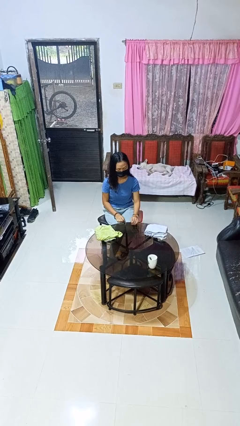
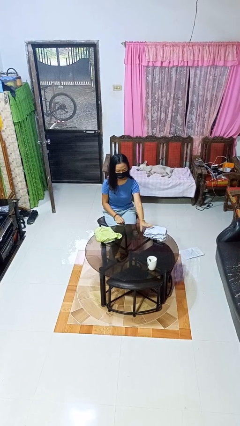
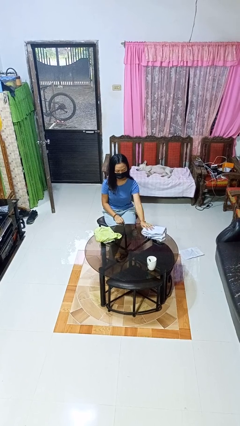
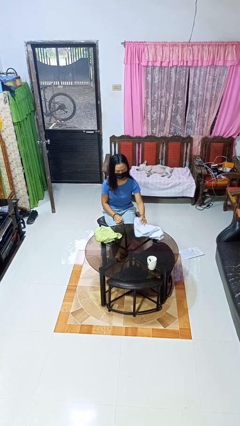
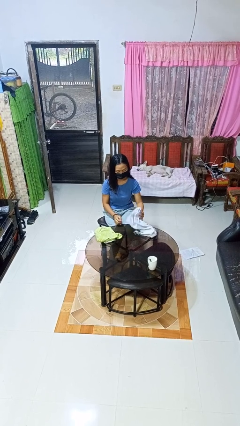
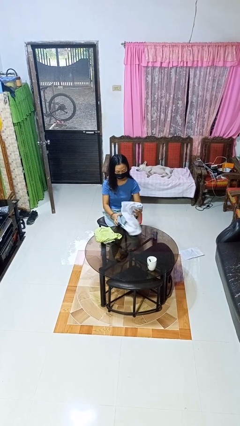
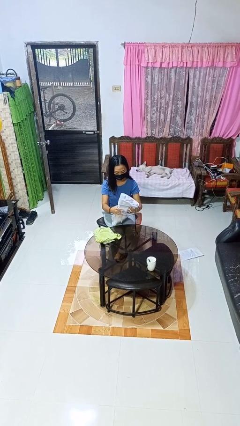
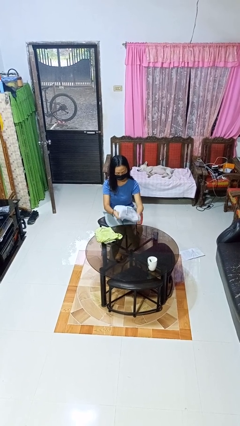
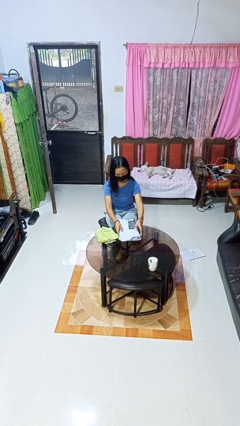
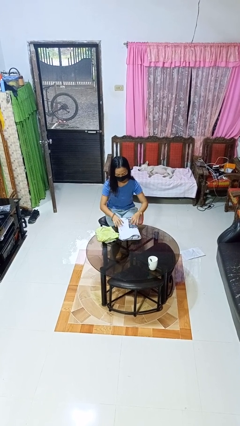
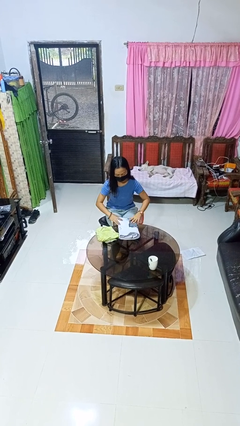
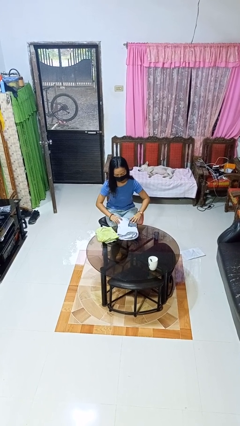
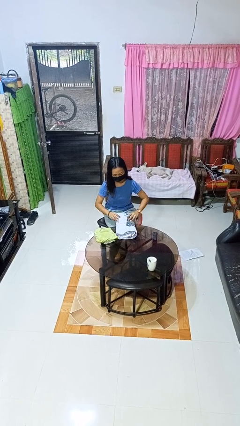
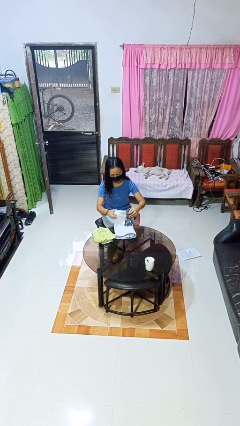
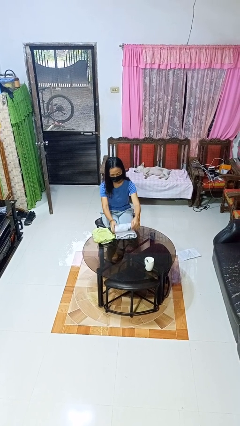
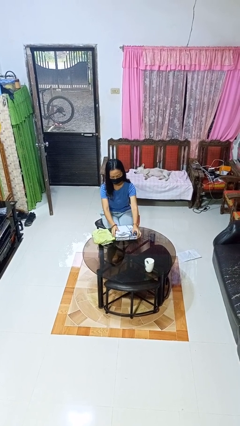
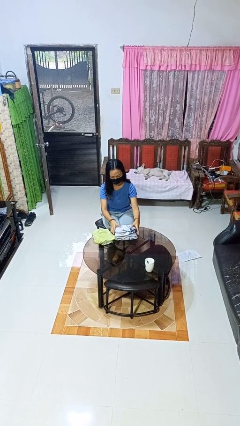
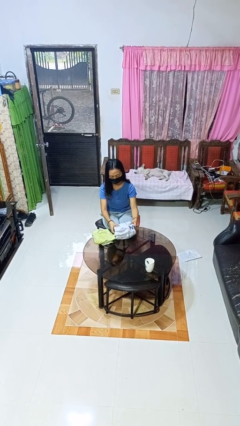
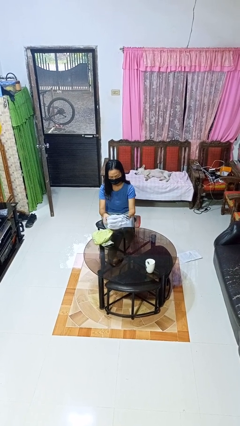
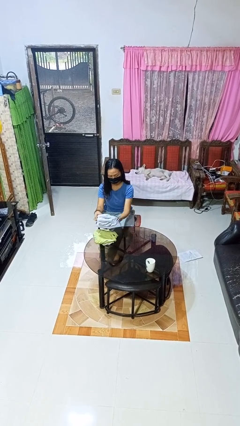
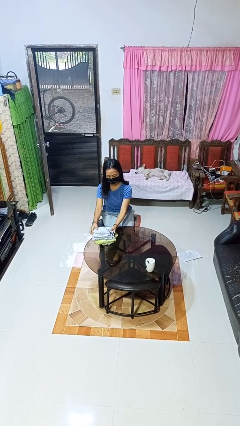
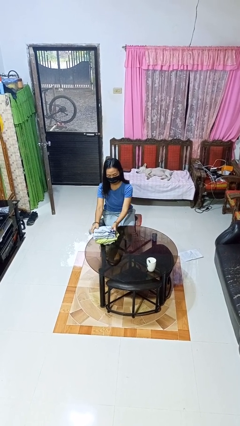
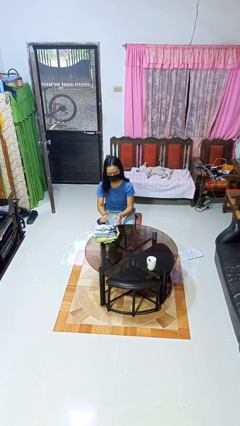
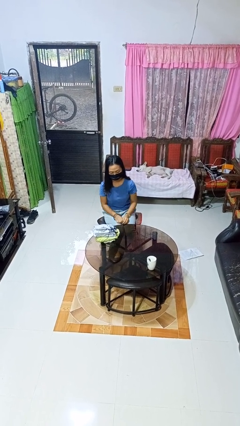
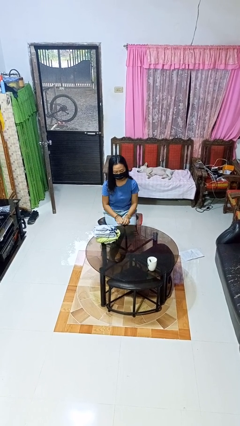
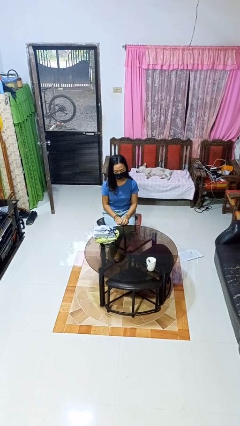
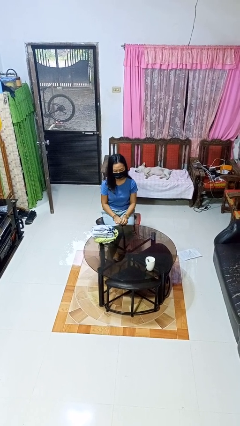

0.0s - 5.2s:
person folds towel

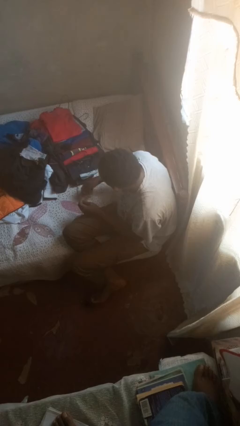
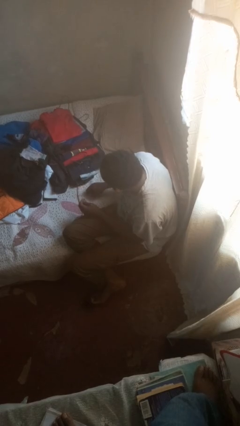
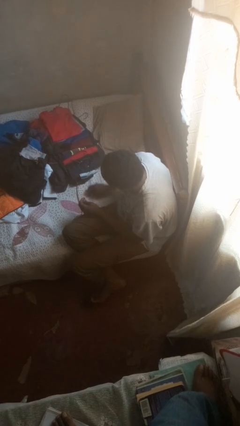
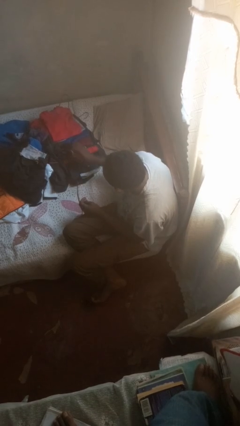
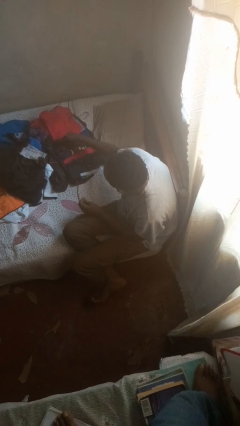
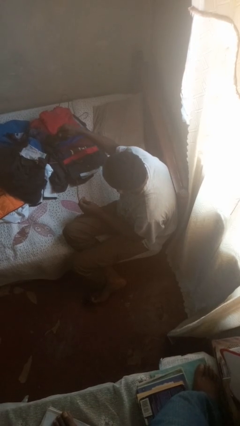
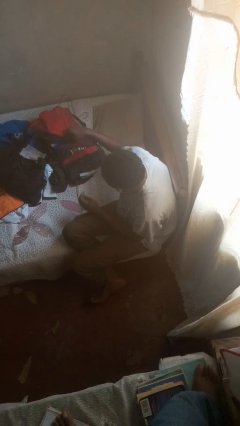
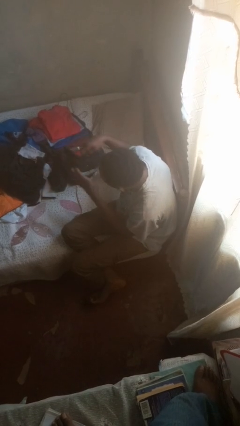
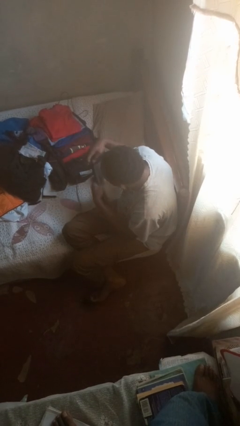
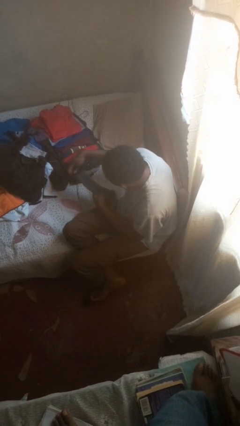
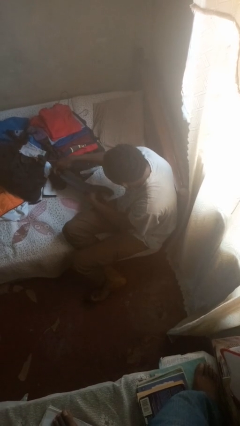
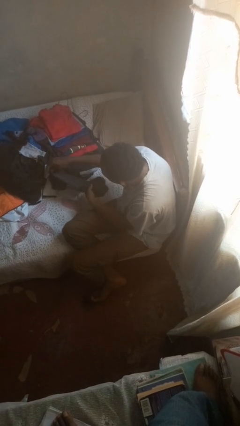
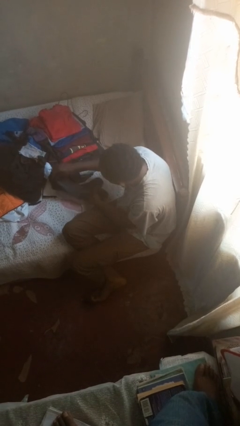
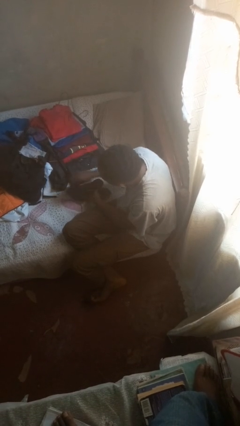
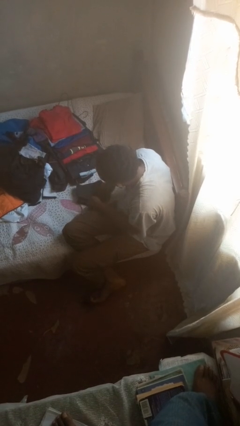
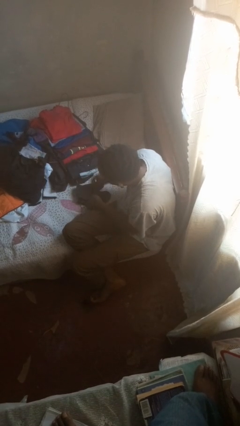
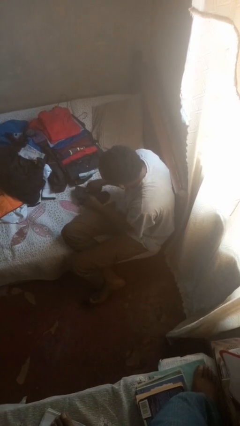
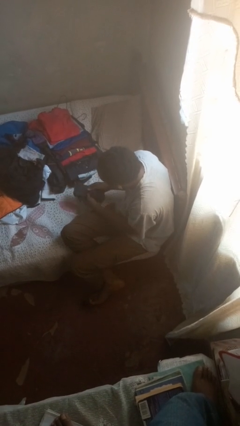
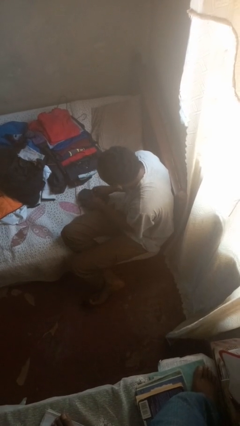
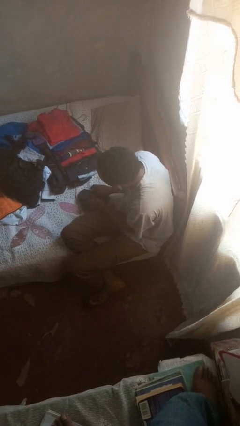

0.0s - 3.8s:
person folds socks

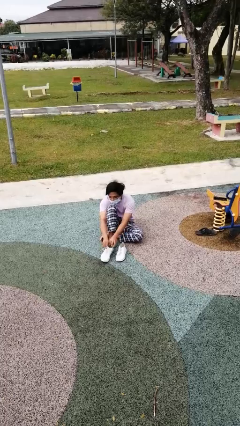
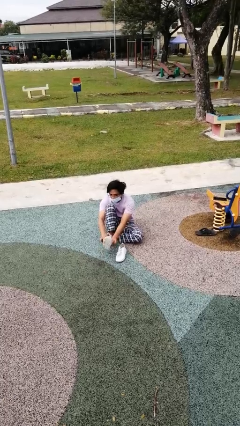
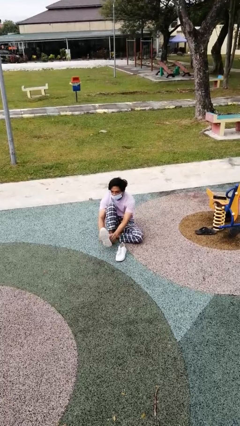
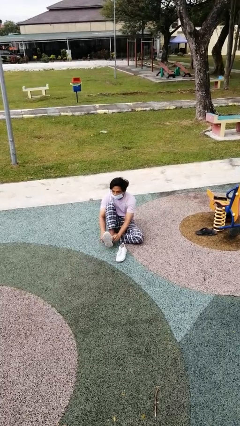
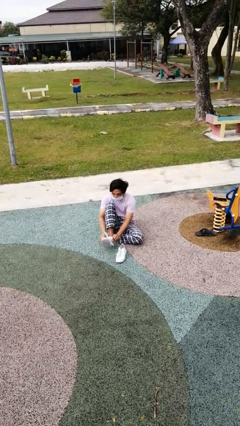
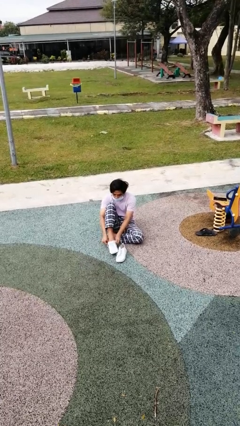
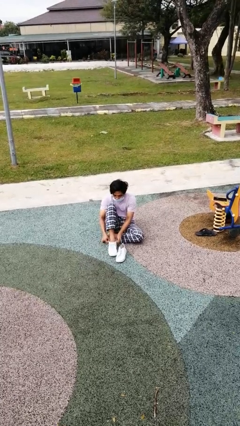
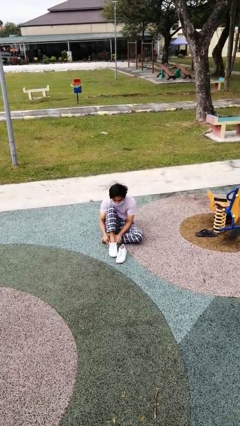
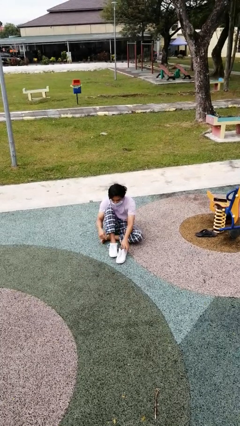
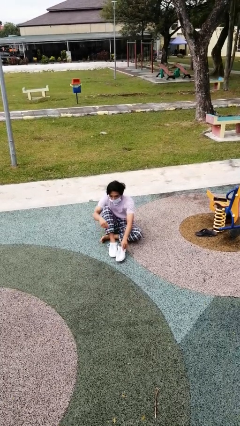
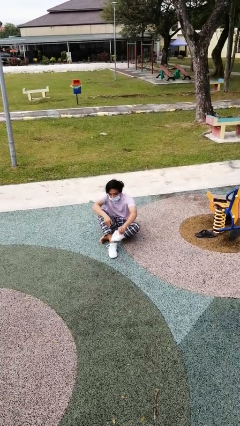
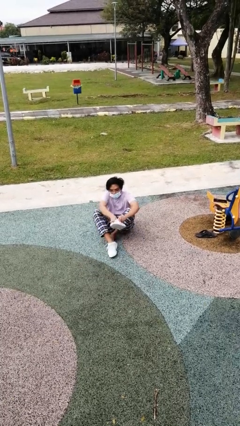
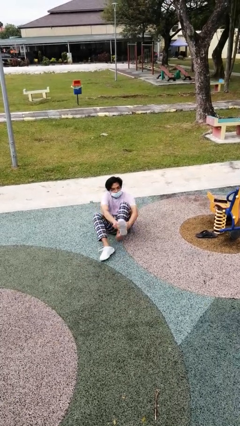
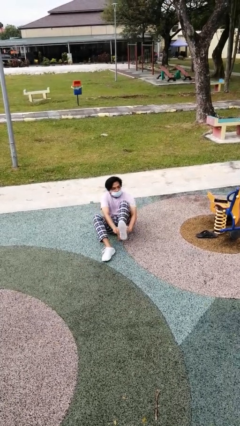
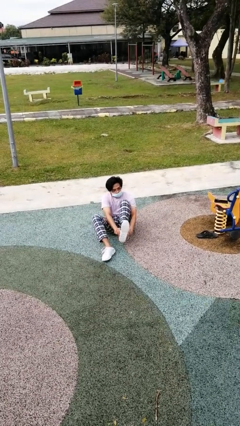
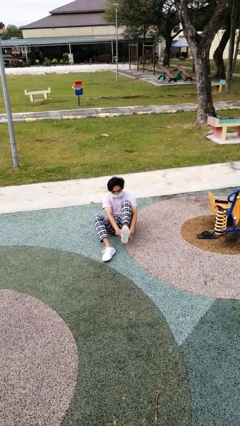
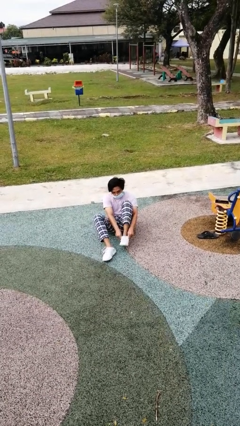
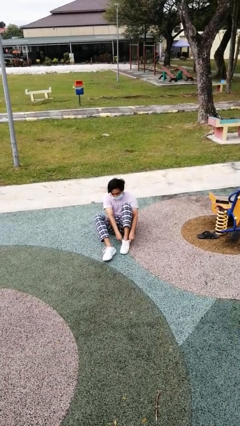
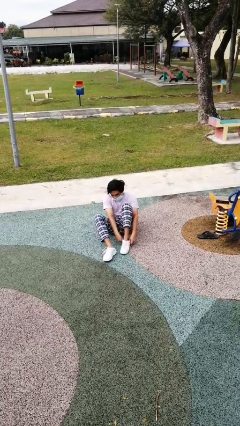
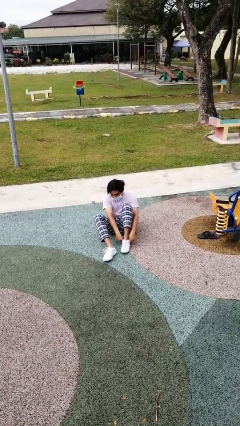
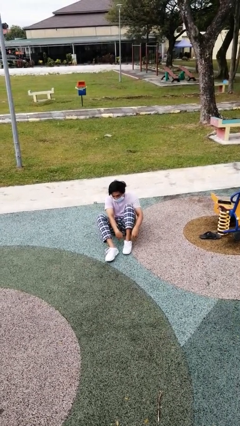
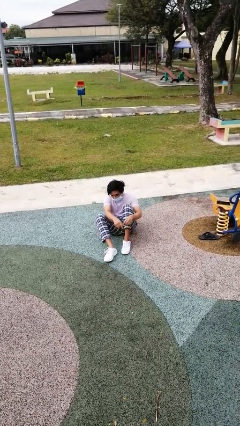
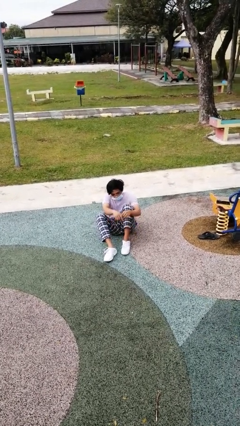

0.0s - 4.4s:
person puts on shoes

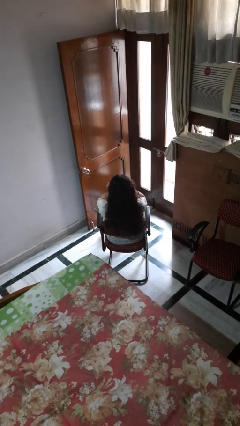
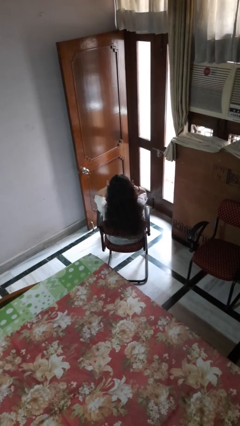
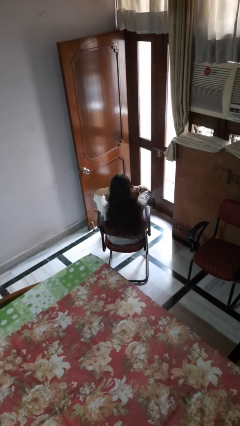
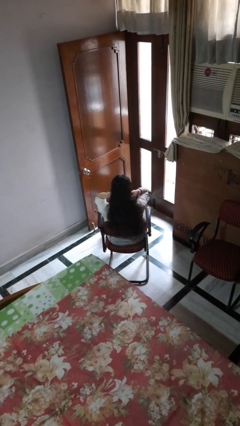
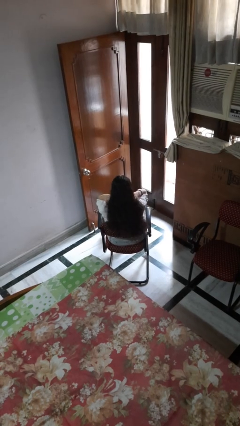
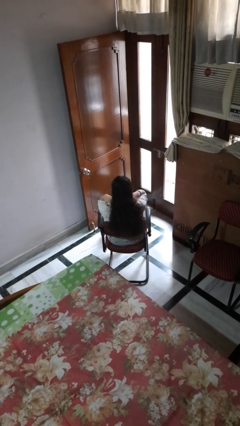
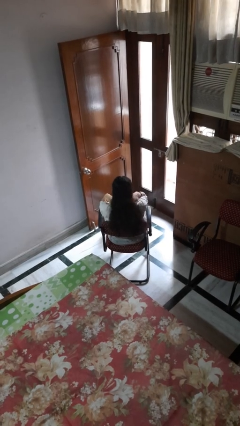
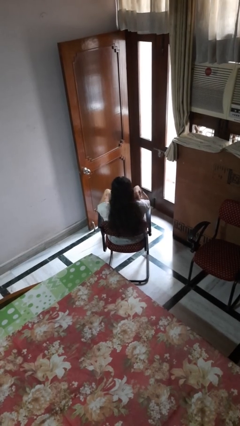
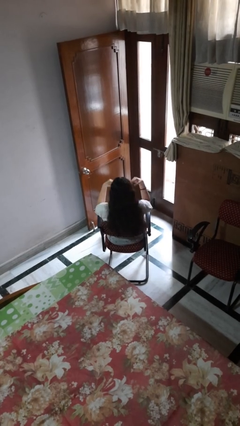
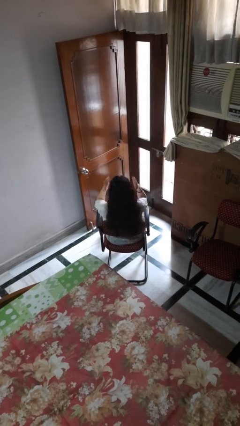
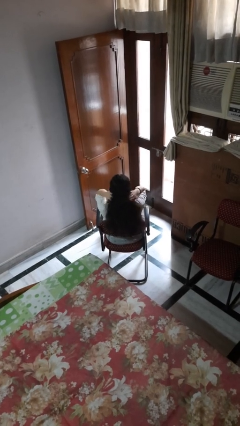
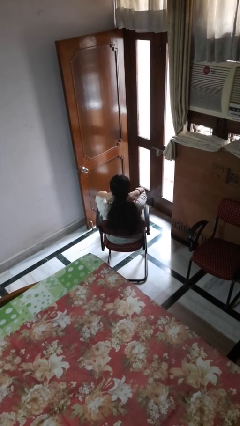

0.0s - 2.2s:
person strokes hair

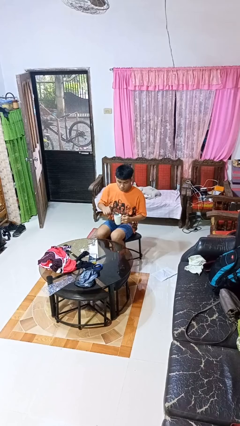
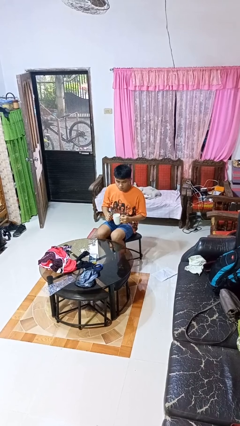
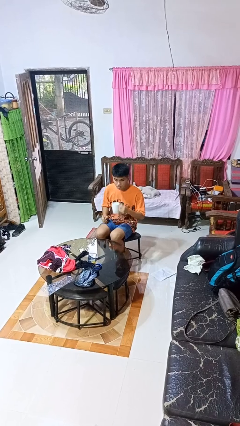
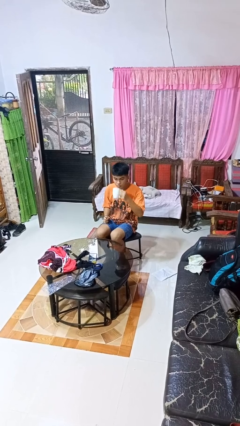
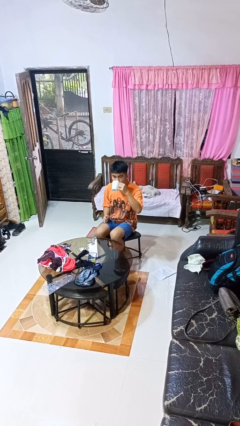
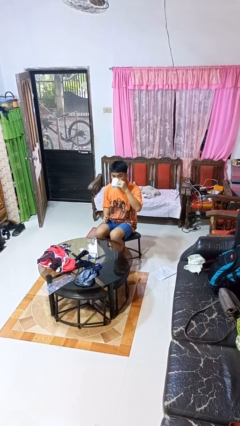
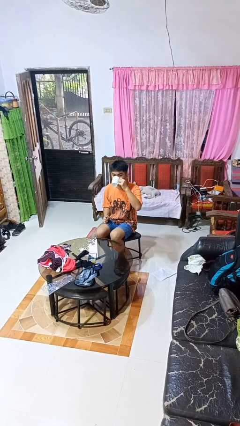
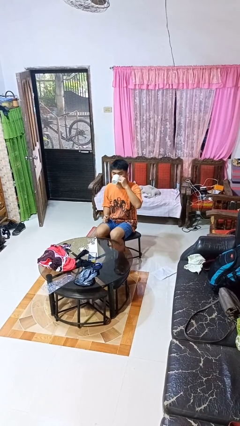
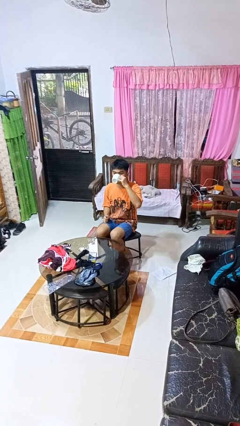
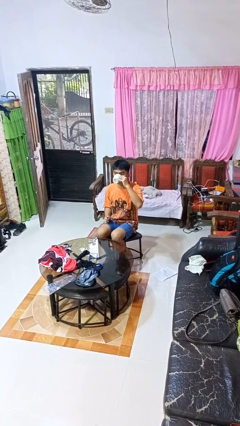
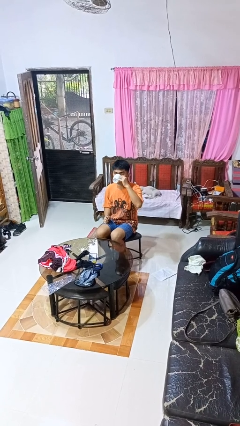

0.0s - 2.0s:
person drinks from mug
